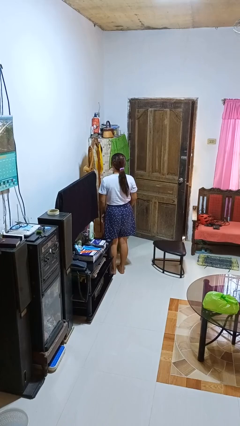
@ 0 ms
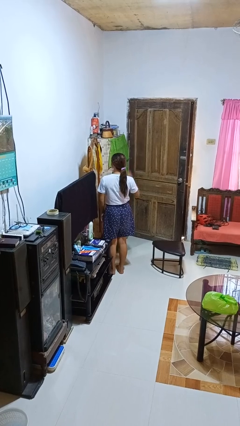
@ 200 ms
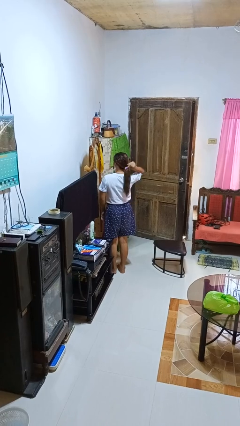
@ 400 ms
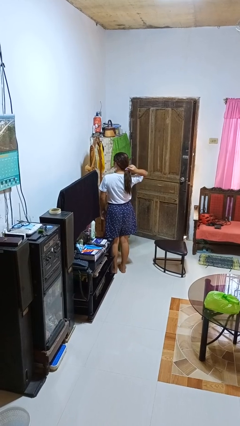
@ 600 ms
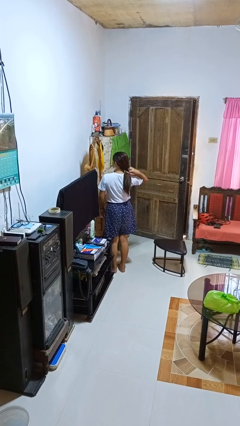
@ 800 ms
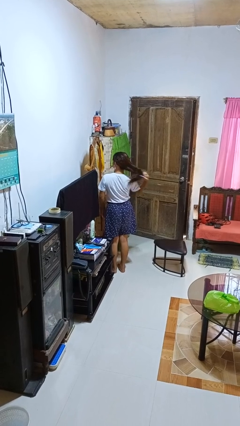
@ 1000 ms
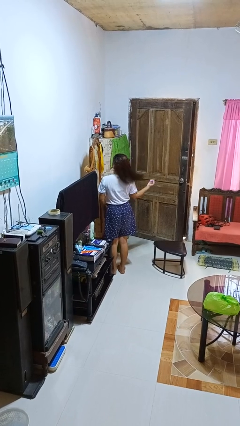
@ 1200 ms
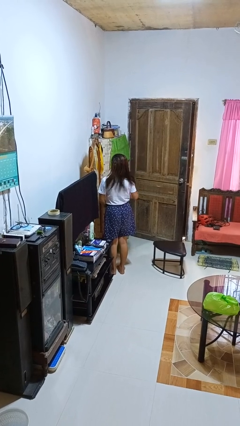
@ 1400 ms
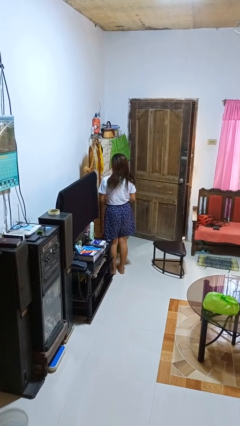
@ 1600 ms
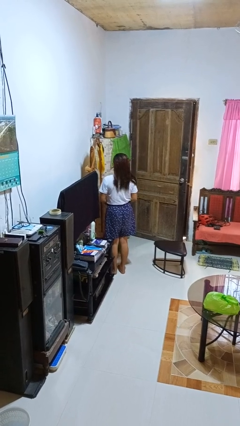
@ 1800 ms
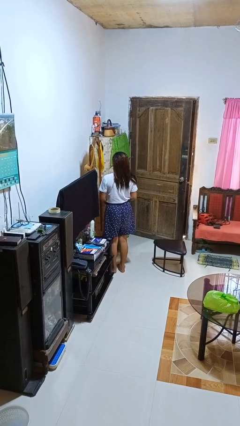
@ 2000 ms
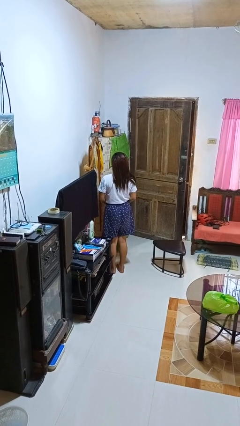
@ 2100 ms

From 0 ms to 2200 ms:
person takes off hairtie

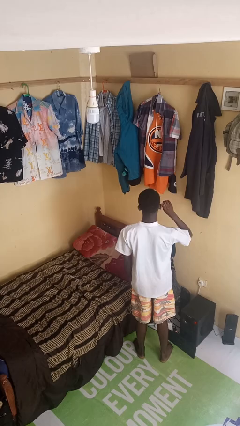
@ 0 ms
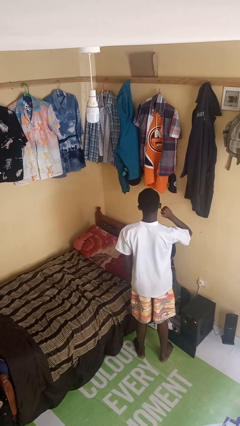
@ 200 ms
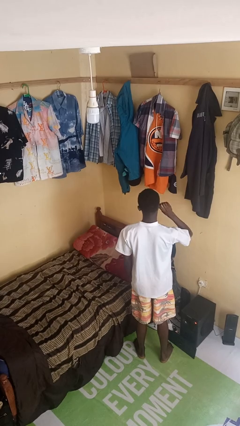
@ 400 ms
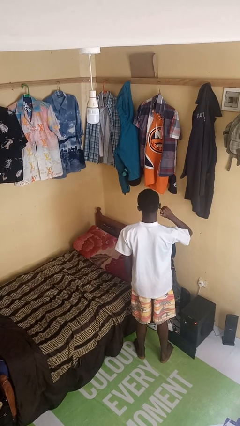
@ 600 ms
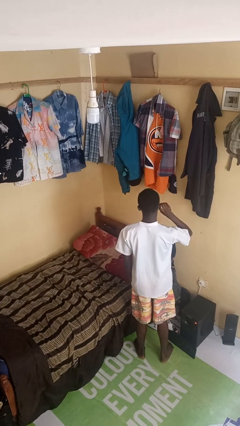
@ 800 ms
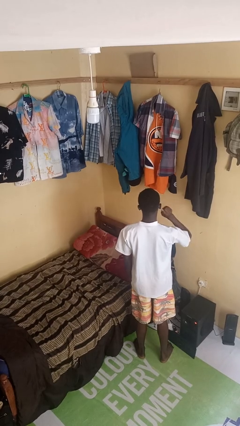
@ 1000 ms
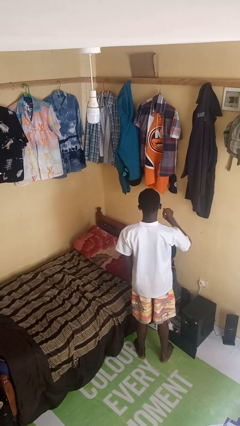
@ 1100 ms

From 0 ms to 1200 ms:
person gestures listen closely

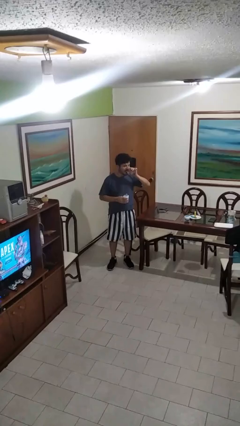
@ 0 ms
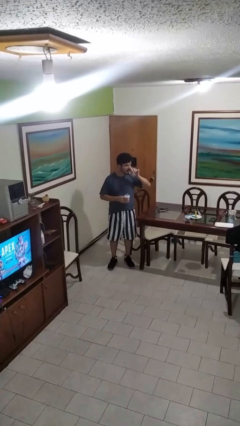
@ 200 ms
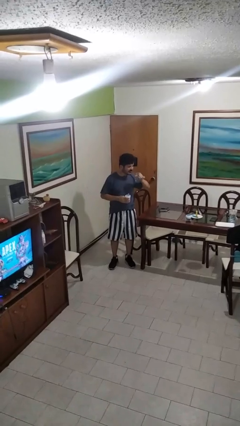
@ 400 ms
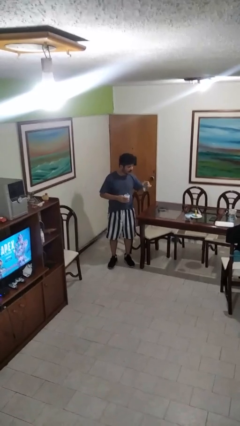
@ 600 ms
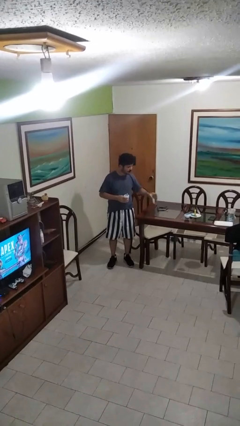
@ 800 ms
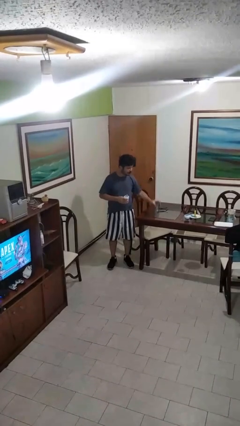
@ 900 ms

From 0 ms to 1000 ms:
person drinks from cup

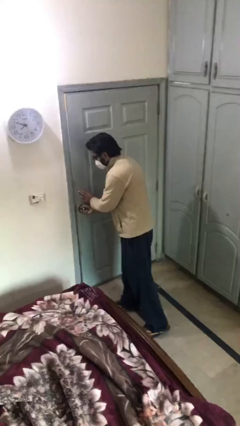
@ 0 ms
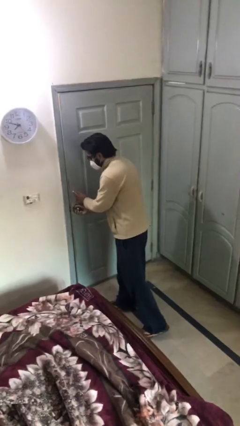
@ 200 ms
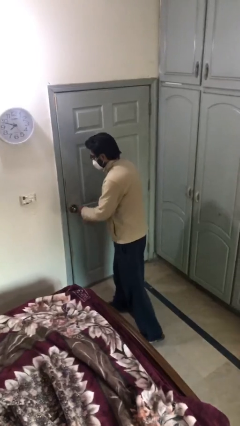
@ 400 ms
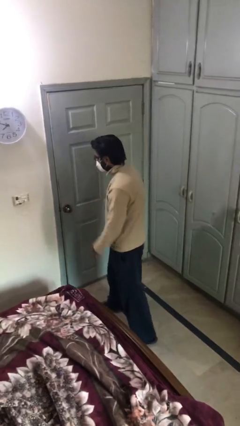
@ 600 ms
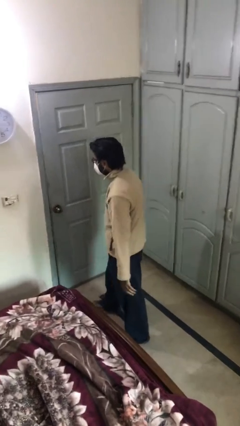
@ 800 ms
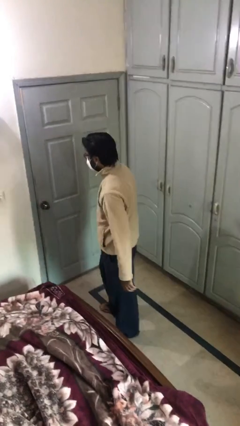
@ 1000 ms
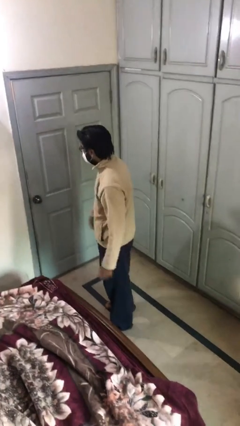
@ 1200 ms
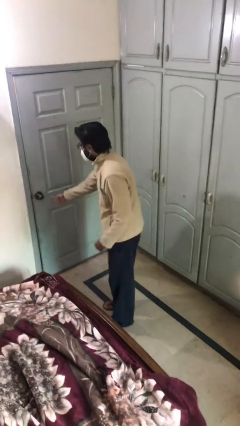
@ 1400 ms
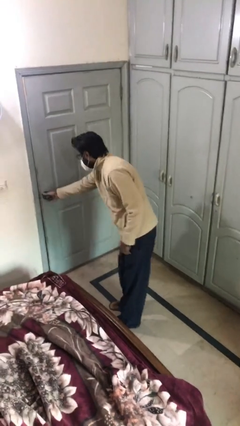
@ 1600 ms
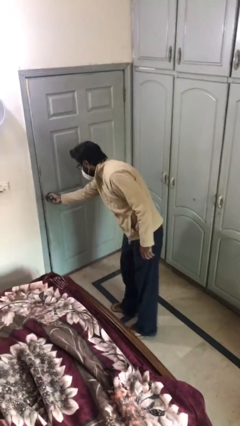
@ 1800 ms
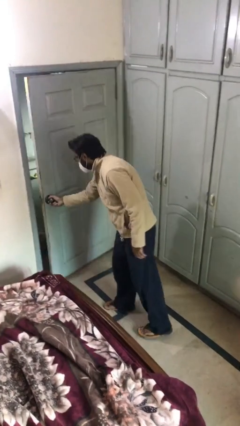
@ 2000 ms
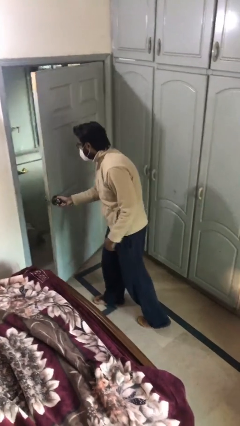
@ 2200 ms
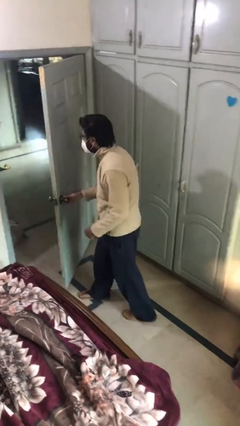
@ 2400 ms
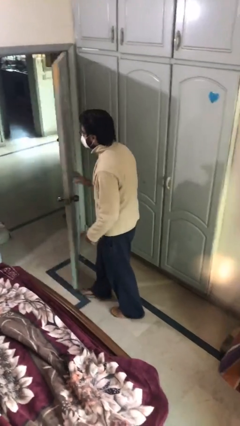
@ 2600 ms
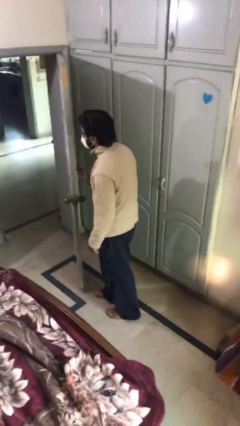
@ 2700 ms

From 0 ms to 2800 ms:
person opens facility door

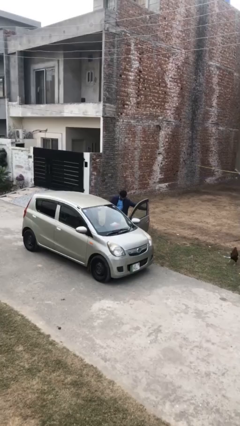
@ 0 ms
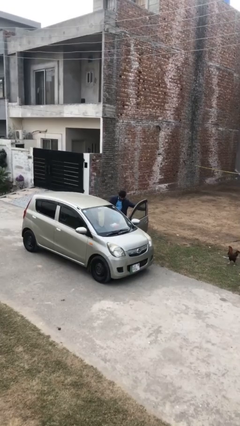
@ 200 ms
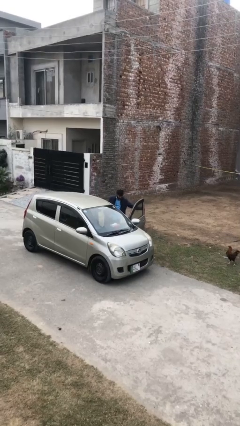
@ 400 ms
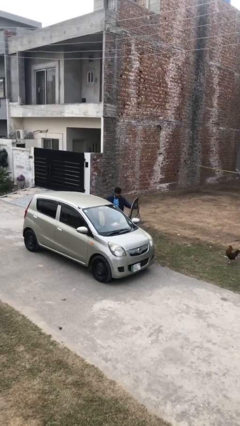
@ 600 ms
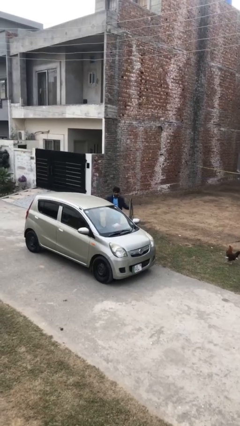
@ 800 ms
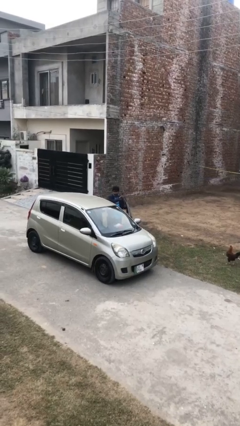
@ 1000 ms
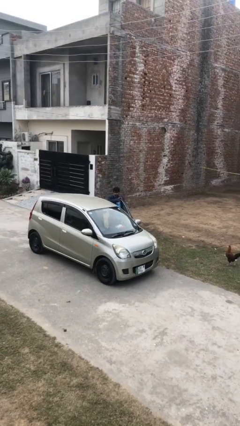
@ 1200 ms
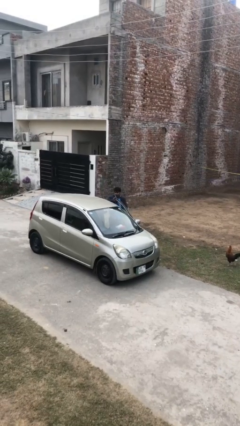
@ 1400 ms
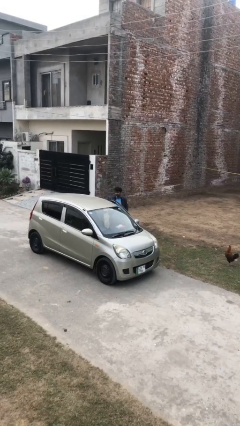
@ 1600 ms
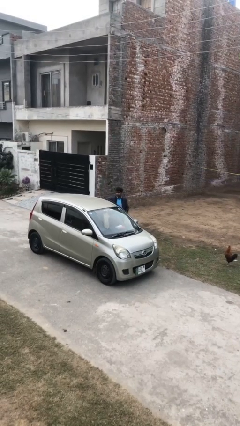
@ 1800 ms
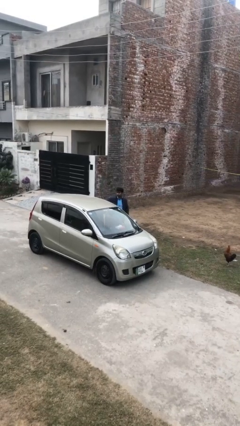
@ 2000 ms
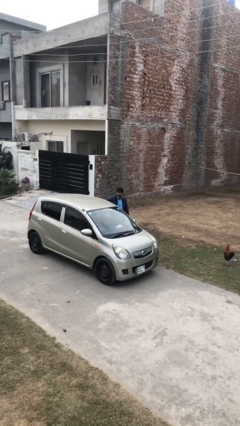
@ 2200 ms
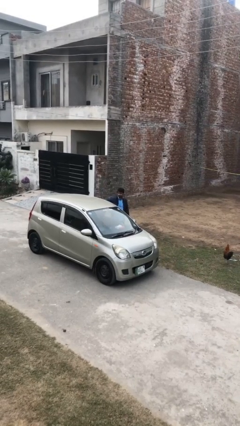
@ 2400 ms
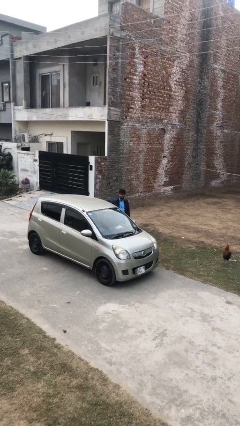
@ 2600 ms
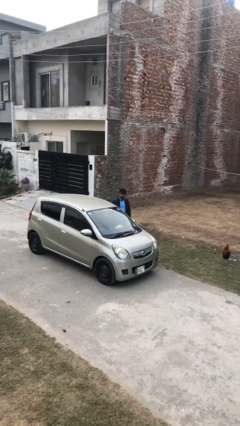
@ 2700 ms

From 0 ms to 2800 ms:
person closes car door

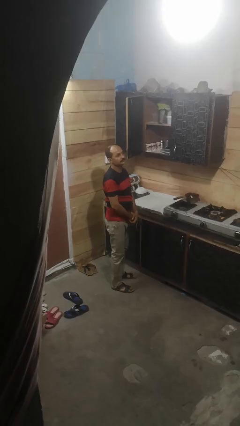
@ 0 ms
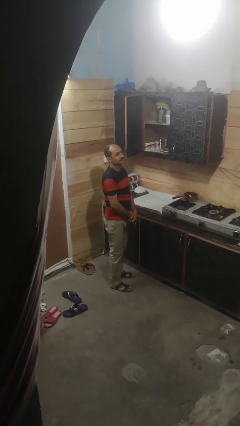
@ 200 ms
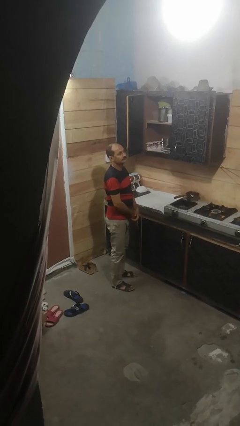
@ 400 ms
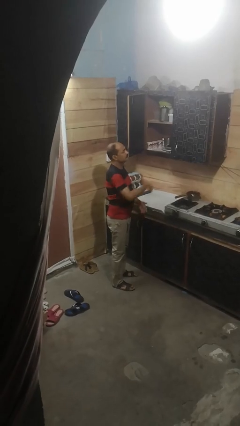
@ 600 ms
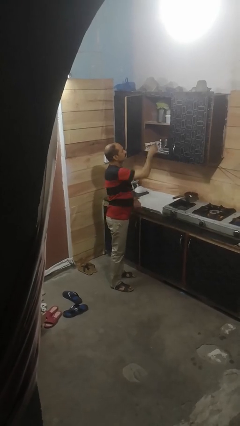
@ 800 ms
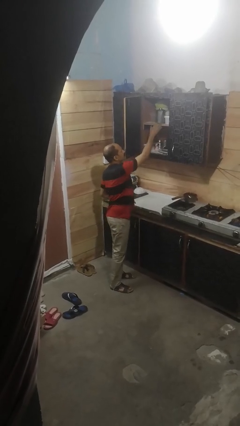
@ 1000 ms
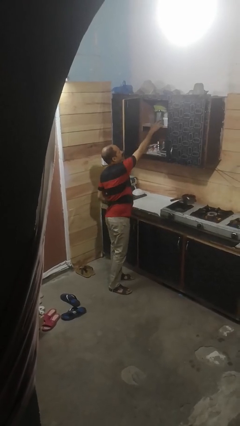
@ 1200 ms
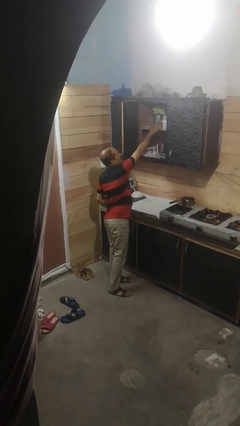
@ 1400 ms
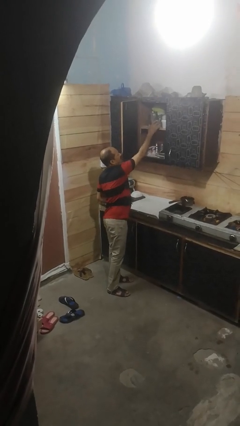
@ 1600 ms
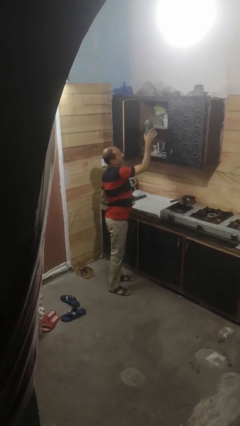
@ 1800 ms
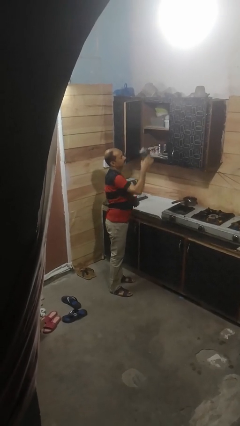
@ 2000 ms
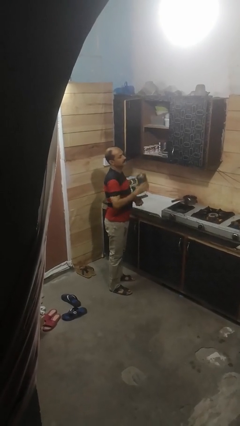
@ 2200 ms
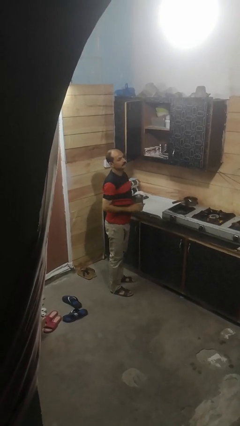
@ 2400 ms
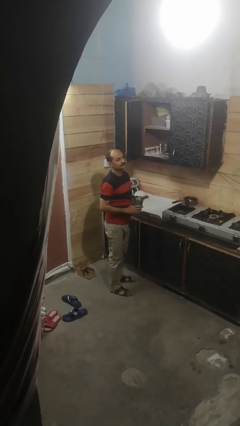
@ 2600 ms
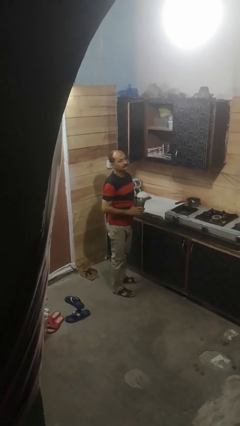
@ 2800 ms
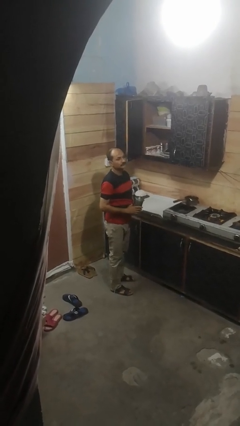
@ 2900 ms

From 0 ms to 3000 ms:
person picks up object from cabinet

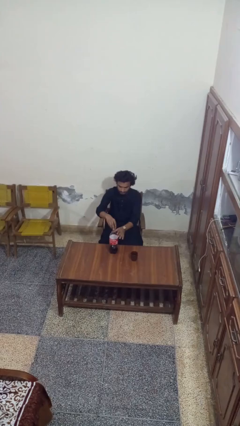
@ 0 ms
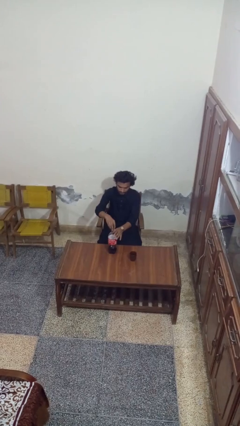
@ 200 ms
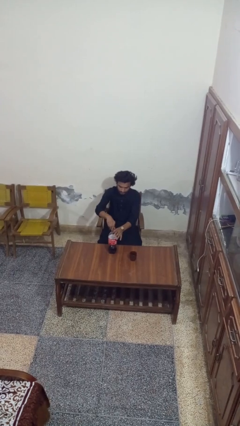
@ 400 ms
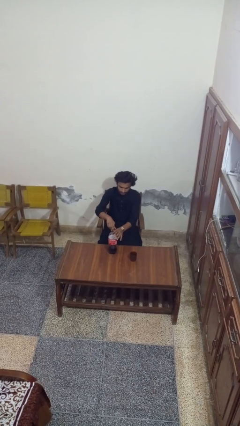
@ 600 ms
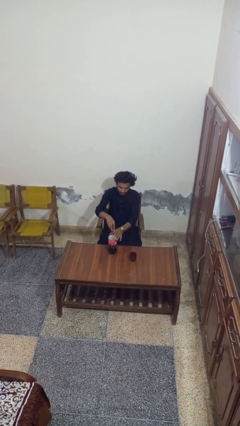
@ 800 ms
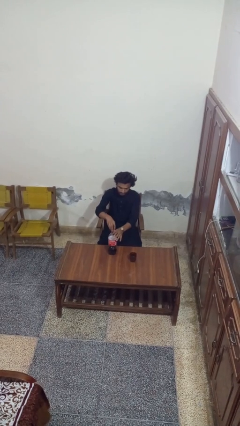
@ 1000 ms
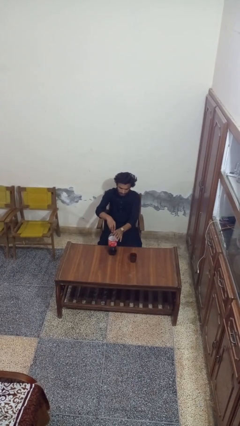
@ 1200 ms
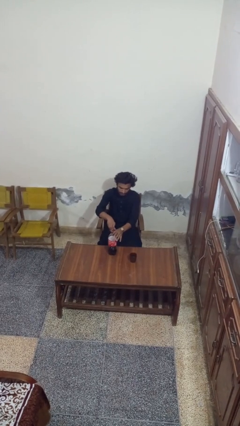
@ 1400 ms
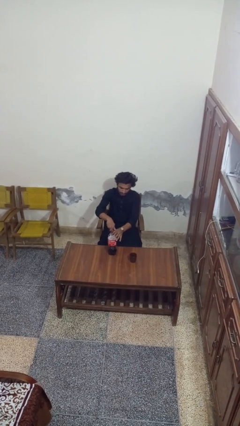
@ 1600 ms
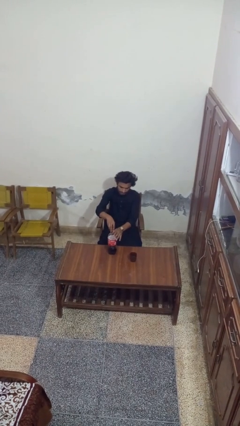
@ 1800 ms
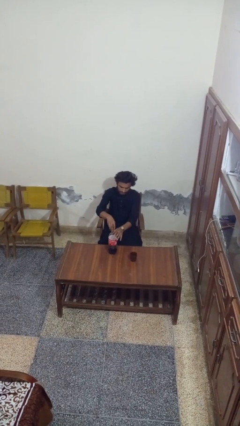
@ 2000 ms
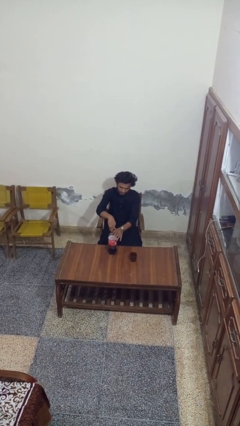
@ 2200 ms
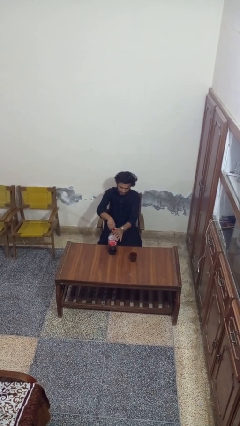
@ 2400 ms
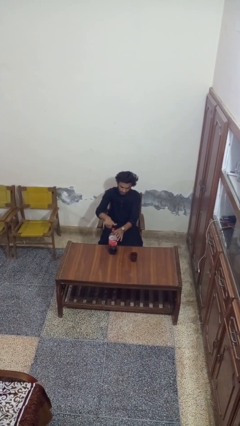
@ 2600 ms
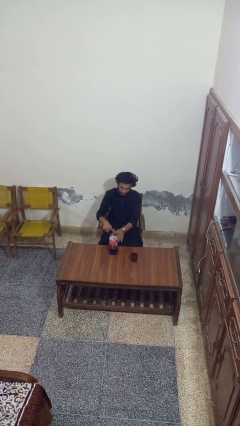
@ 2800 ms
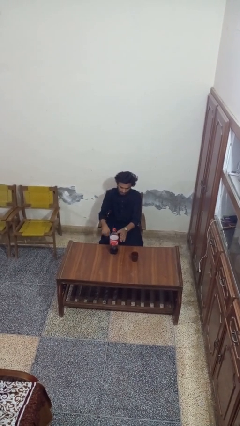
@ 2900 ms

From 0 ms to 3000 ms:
person screws lid to bottle

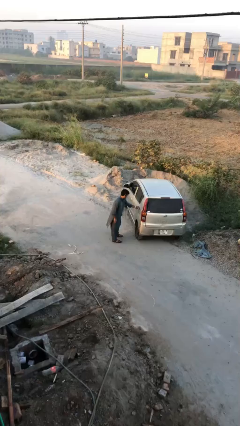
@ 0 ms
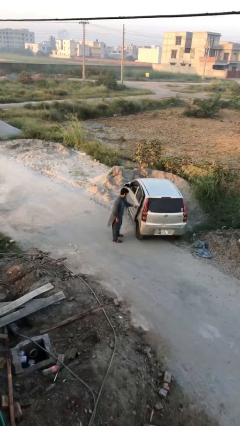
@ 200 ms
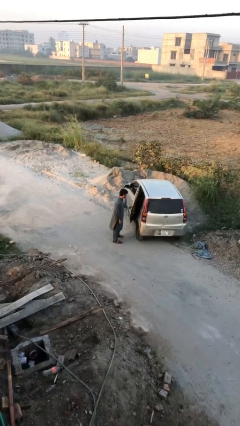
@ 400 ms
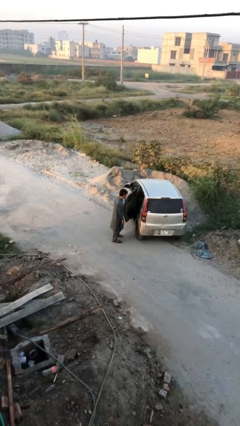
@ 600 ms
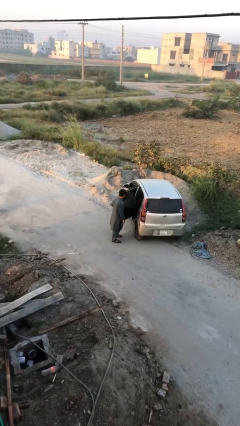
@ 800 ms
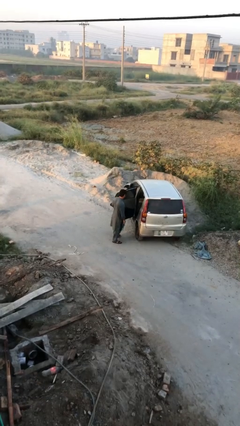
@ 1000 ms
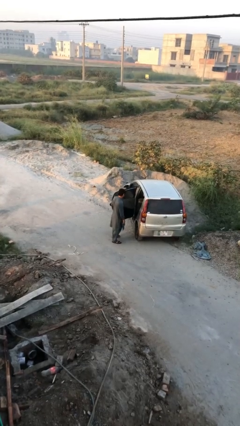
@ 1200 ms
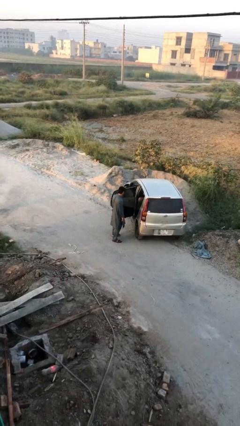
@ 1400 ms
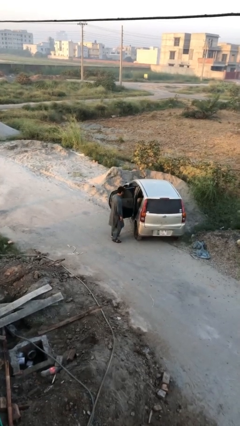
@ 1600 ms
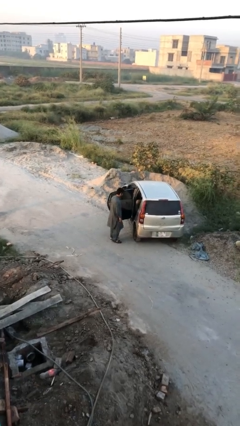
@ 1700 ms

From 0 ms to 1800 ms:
person opens car door
